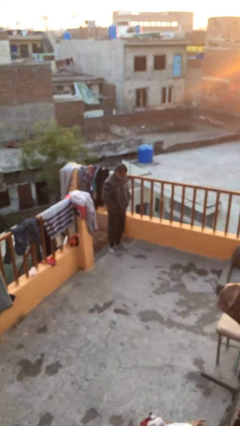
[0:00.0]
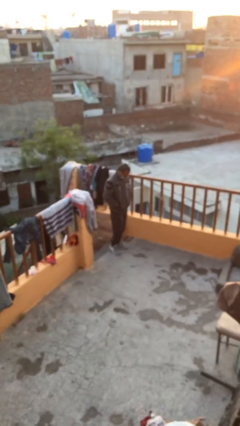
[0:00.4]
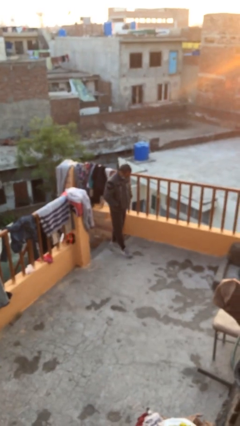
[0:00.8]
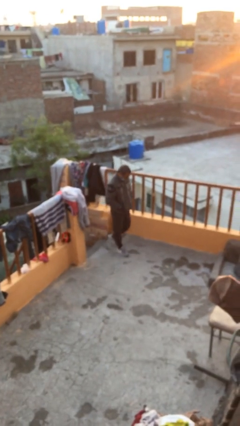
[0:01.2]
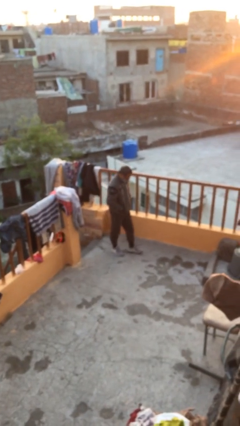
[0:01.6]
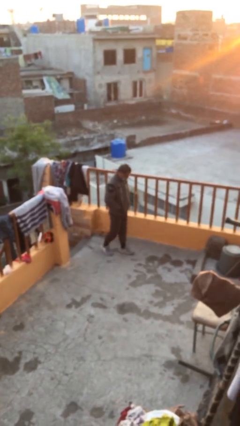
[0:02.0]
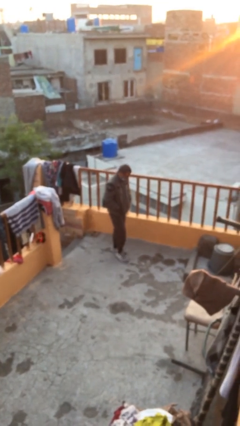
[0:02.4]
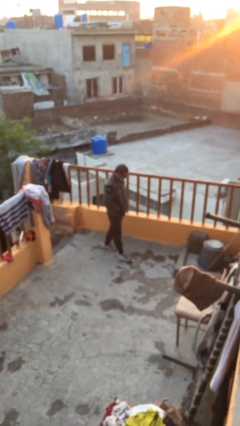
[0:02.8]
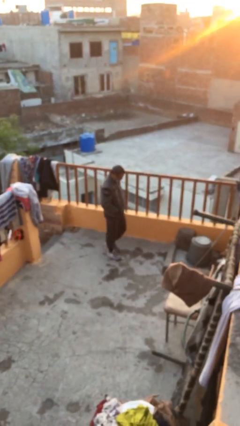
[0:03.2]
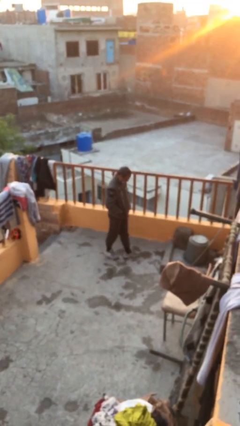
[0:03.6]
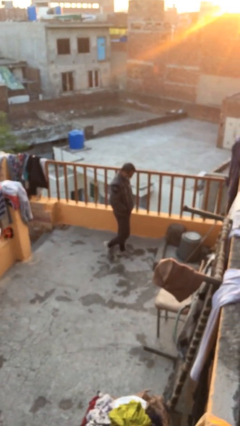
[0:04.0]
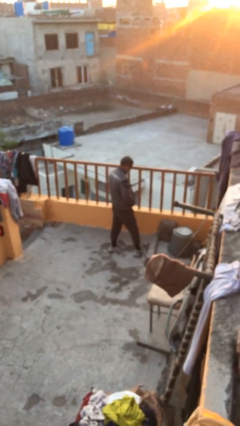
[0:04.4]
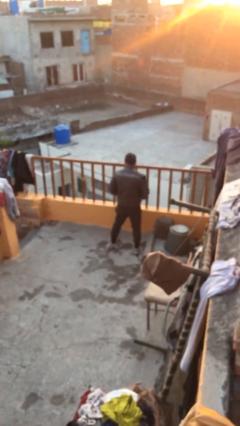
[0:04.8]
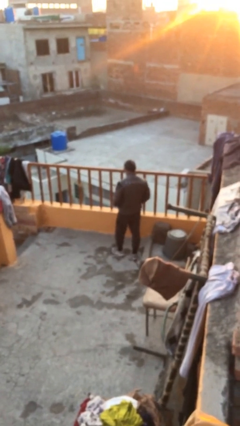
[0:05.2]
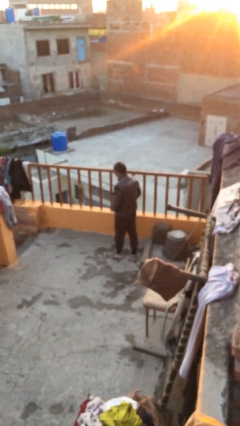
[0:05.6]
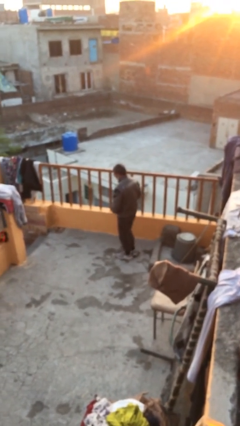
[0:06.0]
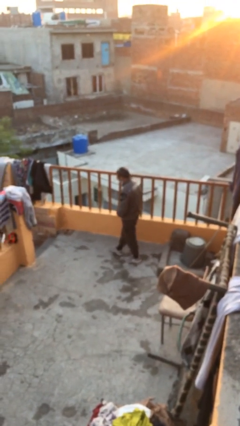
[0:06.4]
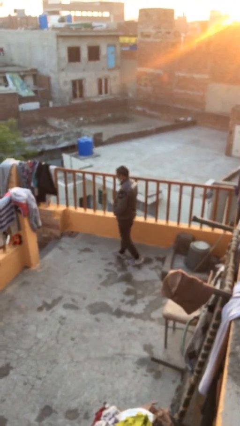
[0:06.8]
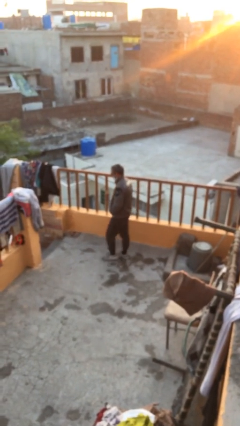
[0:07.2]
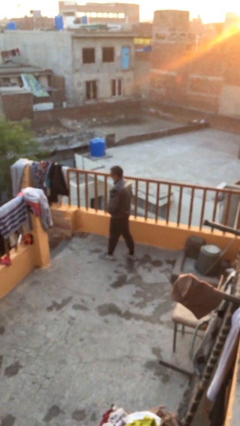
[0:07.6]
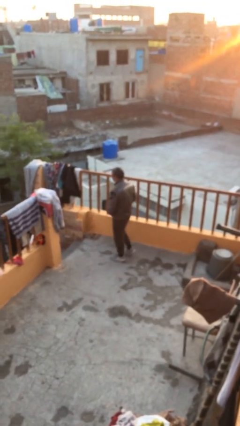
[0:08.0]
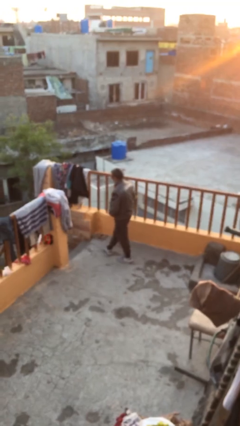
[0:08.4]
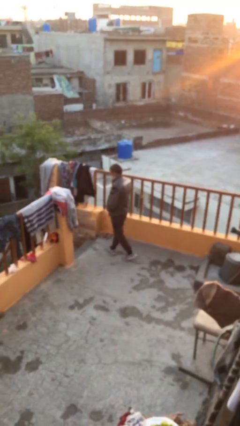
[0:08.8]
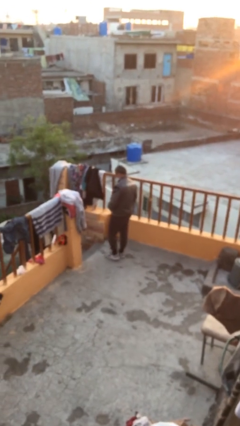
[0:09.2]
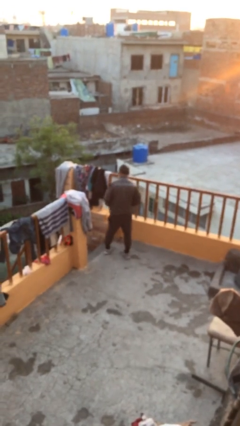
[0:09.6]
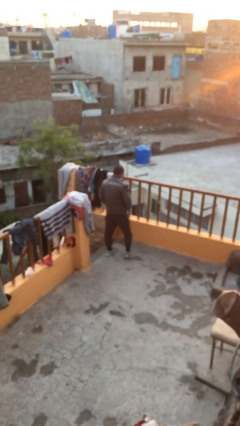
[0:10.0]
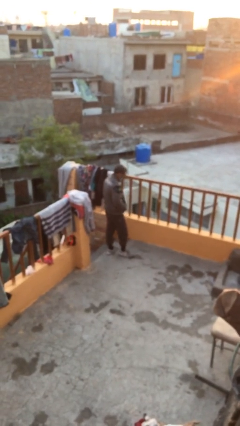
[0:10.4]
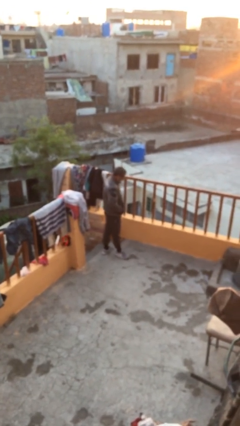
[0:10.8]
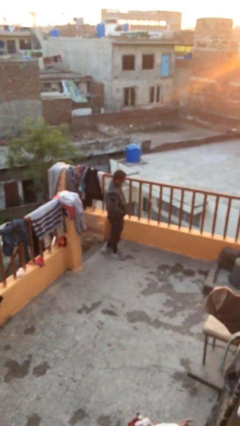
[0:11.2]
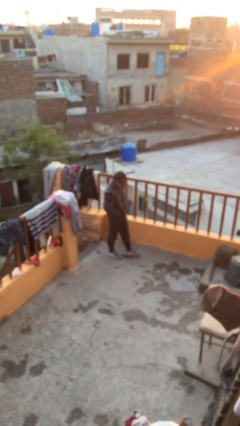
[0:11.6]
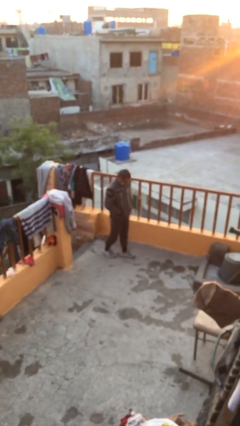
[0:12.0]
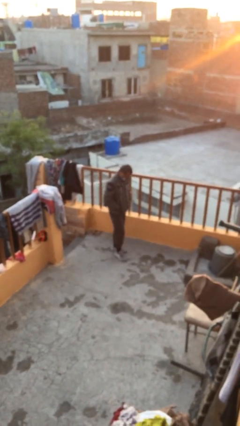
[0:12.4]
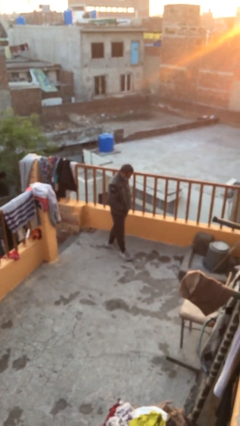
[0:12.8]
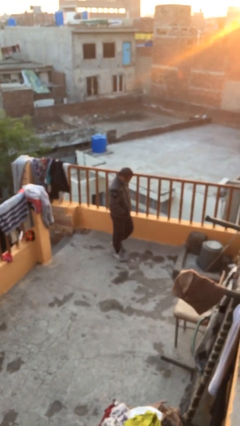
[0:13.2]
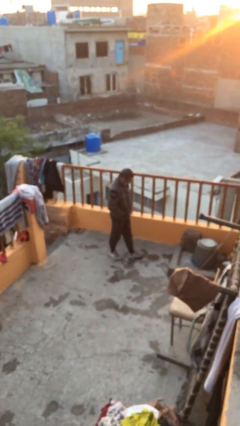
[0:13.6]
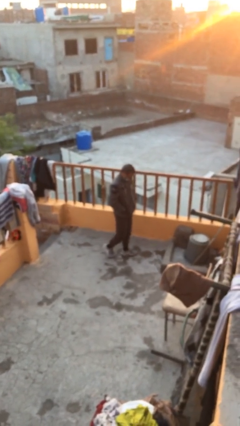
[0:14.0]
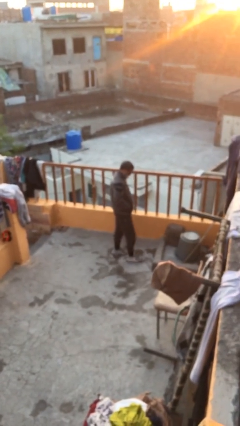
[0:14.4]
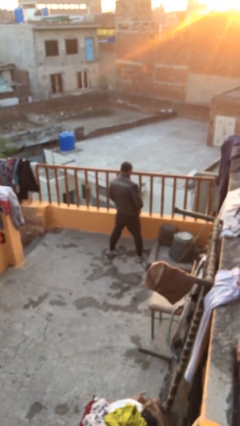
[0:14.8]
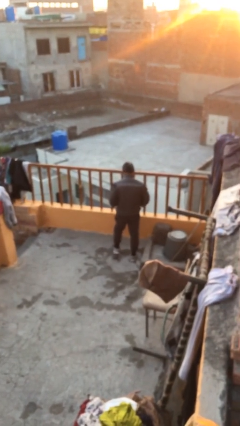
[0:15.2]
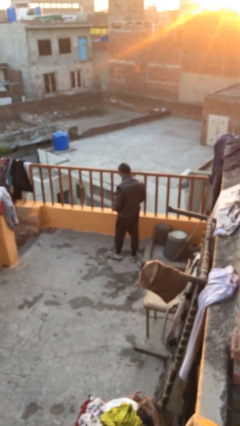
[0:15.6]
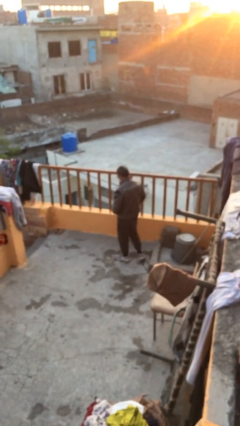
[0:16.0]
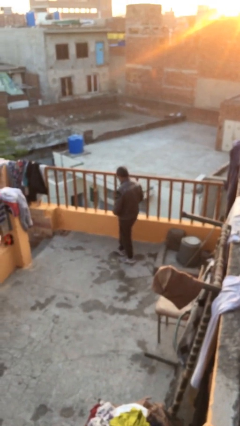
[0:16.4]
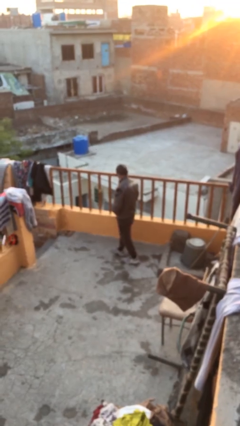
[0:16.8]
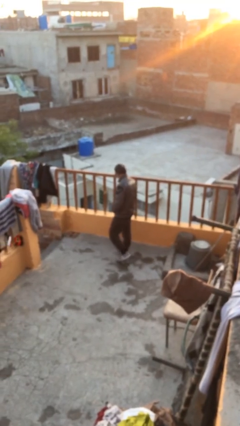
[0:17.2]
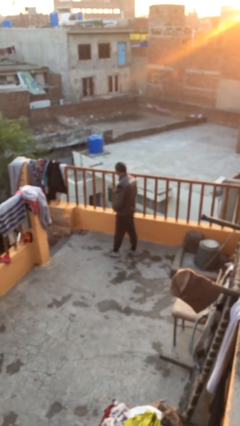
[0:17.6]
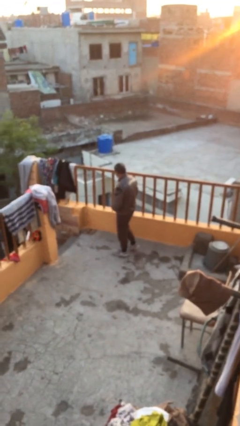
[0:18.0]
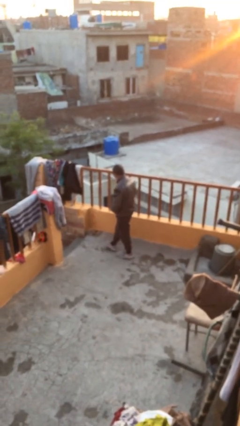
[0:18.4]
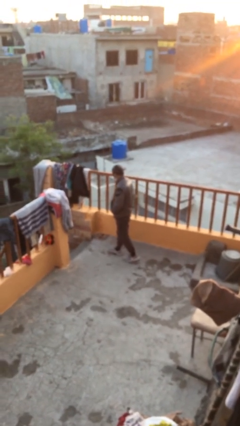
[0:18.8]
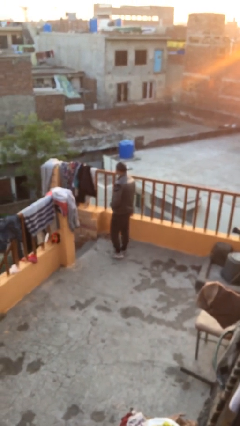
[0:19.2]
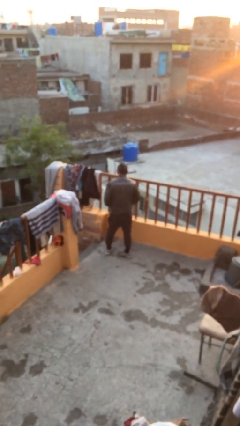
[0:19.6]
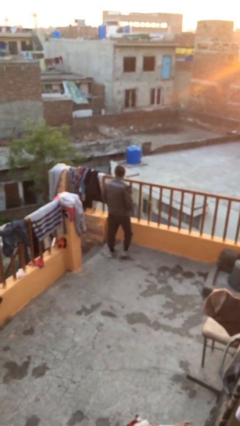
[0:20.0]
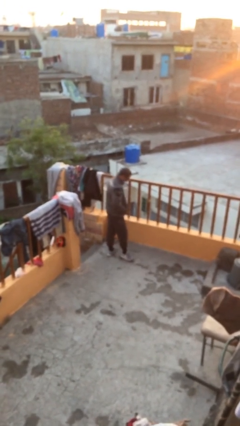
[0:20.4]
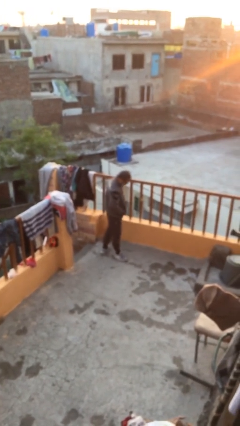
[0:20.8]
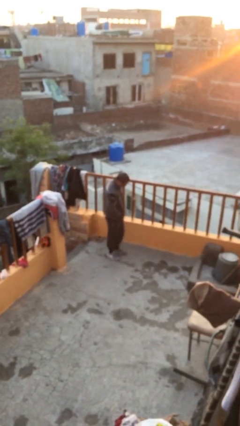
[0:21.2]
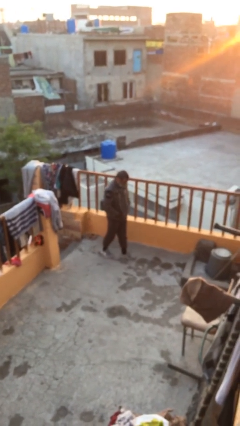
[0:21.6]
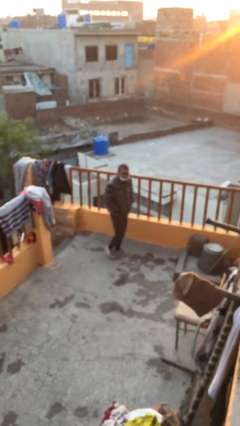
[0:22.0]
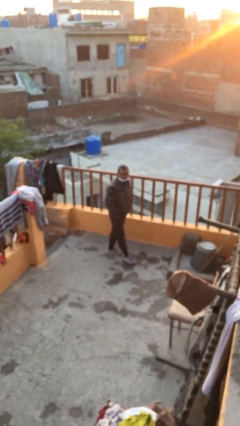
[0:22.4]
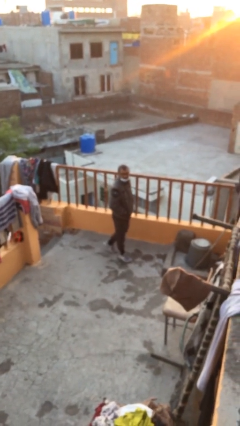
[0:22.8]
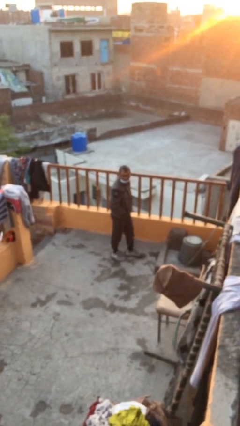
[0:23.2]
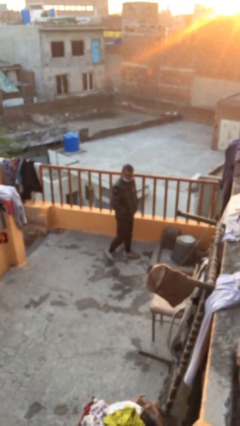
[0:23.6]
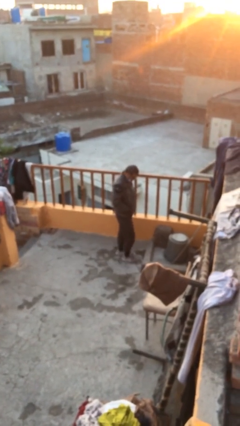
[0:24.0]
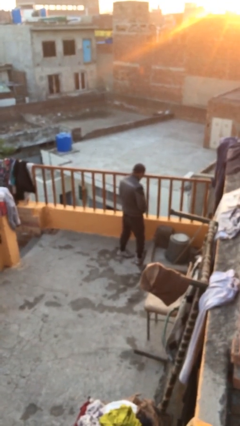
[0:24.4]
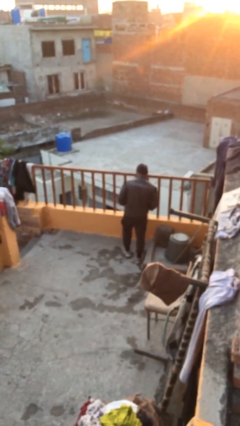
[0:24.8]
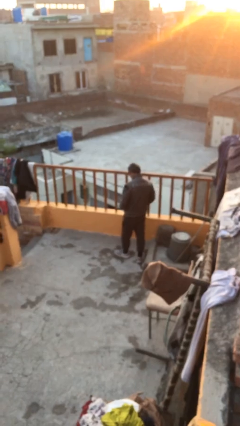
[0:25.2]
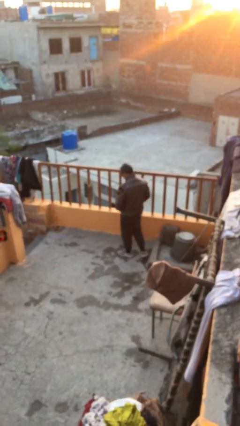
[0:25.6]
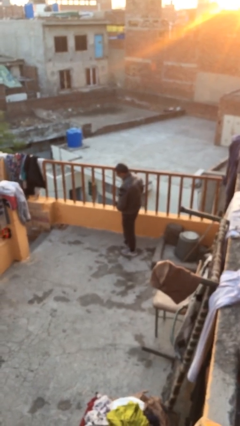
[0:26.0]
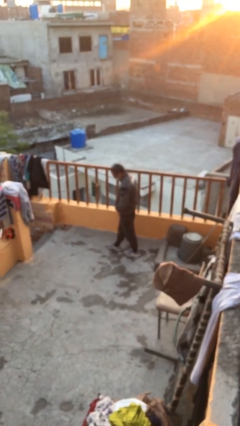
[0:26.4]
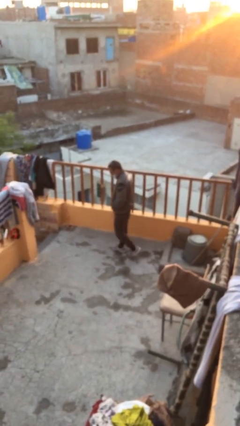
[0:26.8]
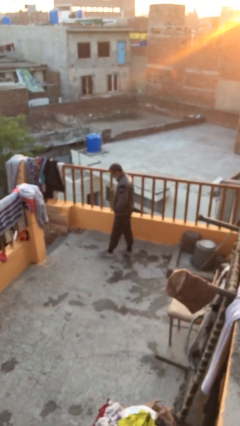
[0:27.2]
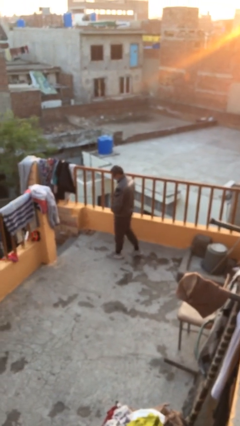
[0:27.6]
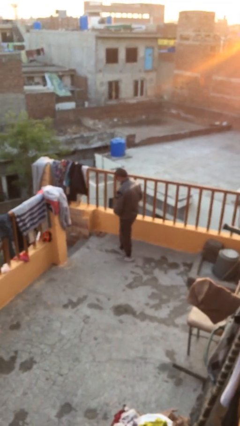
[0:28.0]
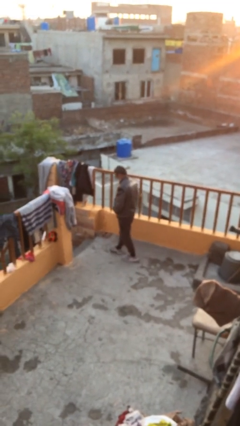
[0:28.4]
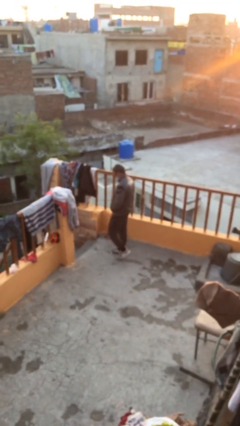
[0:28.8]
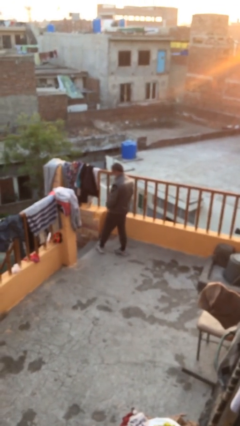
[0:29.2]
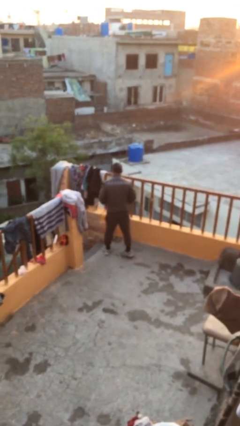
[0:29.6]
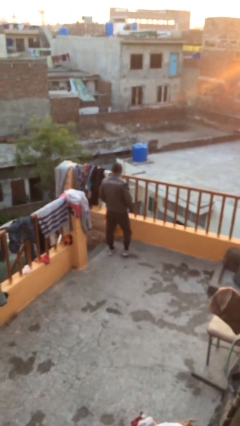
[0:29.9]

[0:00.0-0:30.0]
person walks

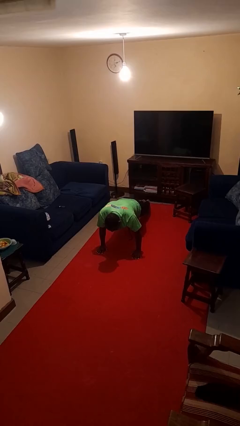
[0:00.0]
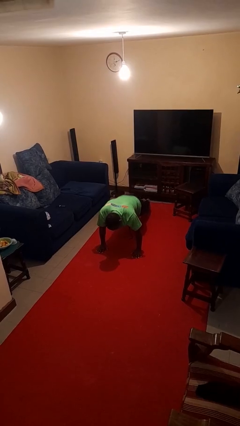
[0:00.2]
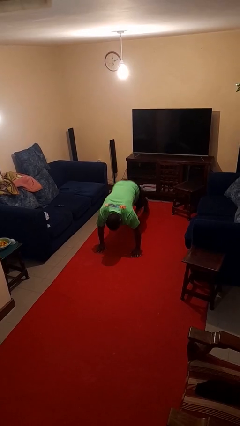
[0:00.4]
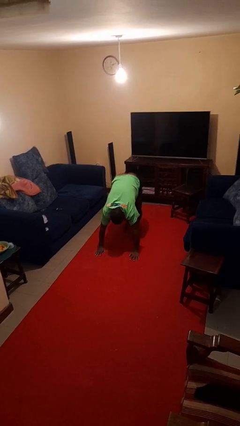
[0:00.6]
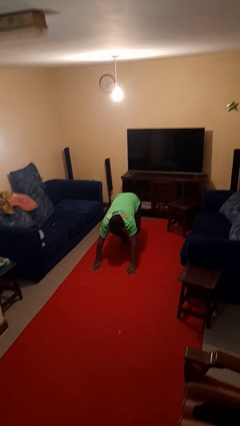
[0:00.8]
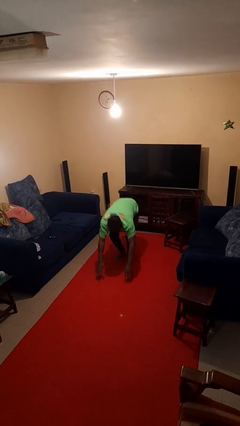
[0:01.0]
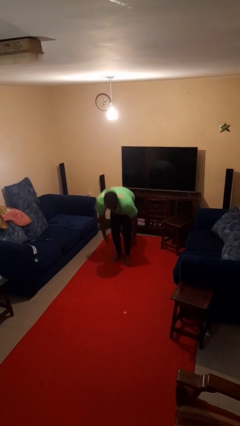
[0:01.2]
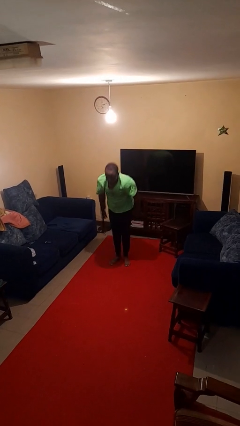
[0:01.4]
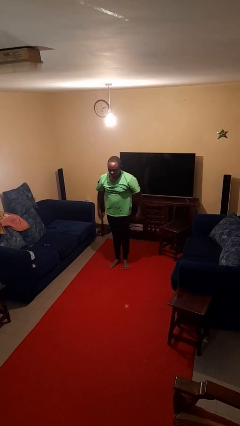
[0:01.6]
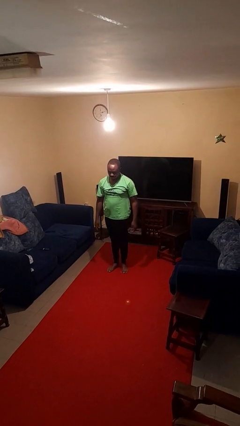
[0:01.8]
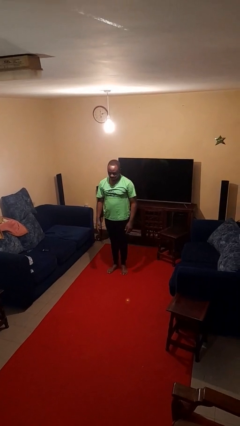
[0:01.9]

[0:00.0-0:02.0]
person stands up from floor

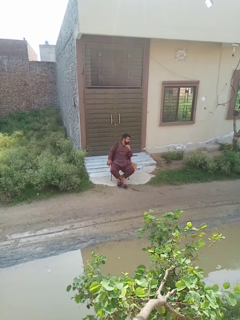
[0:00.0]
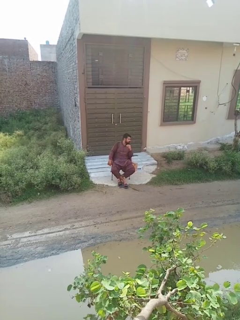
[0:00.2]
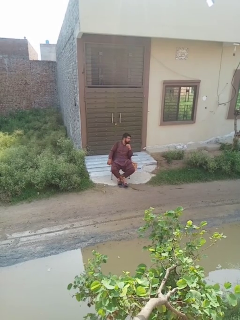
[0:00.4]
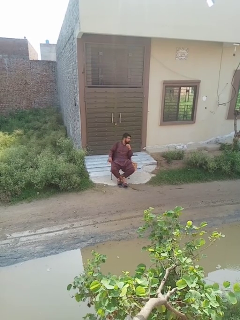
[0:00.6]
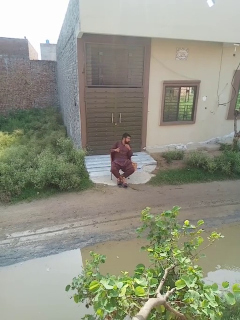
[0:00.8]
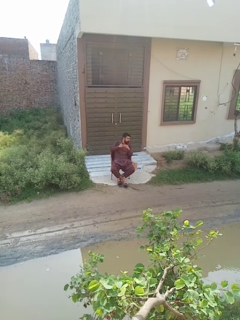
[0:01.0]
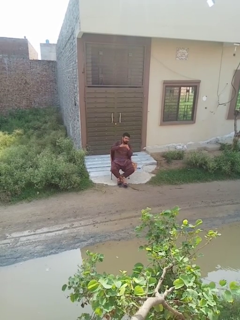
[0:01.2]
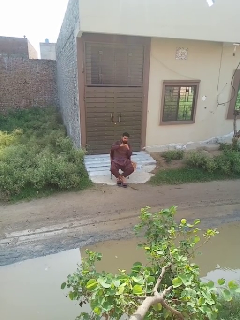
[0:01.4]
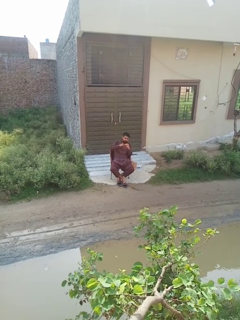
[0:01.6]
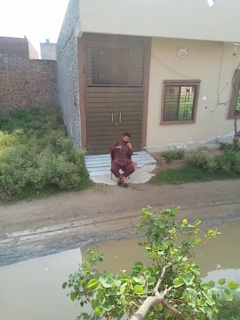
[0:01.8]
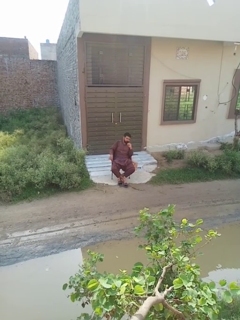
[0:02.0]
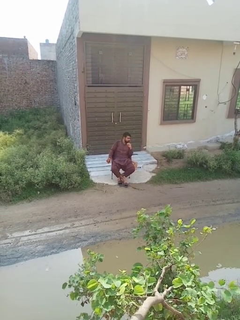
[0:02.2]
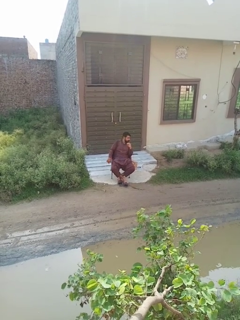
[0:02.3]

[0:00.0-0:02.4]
person takes off ring
